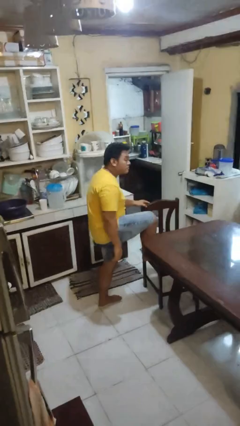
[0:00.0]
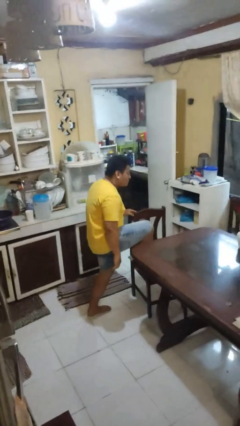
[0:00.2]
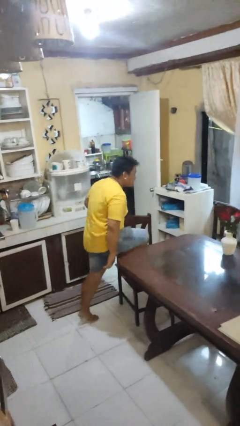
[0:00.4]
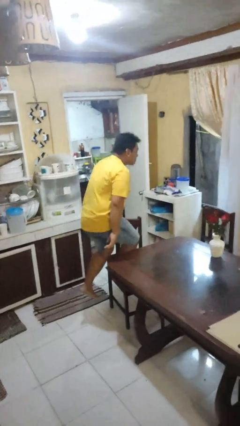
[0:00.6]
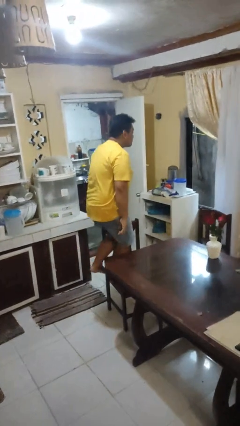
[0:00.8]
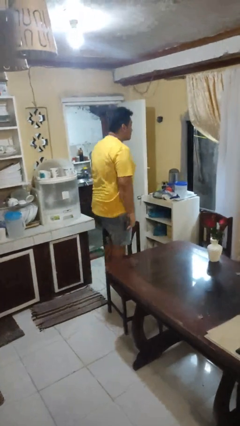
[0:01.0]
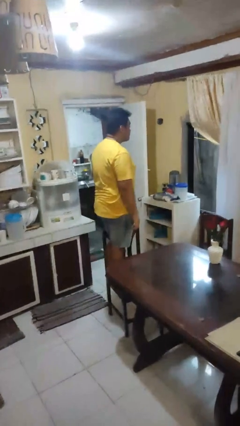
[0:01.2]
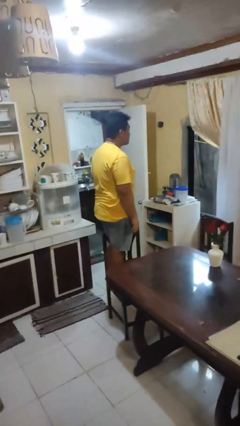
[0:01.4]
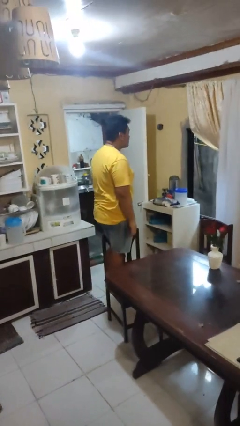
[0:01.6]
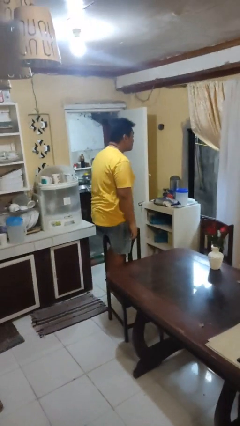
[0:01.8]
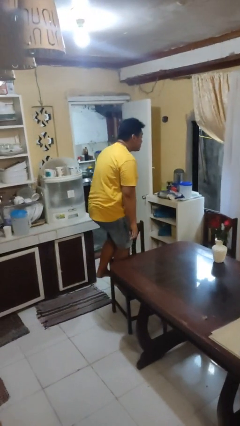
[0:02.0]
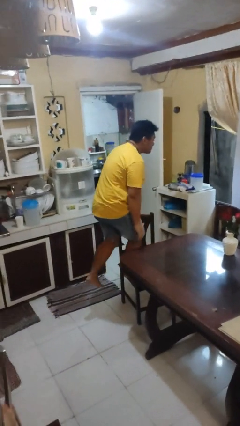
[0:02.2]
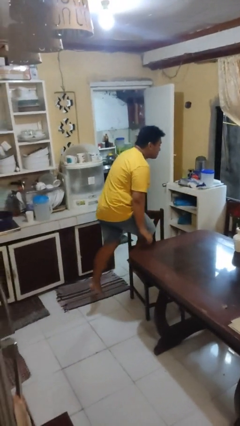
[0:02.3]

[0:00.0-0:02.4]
person climbs on chair

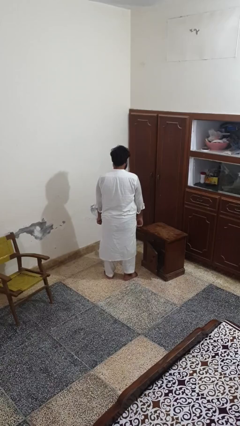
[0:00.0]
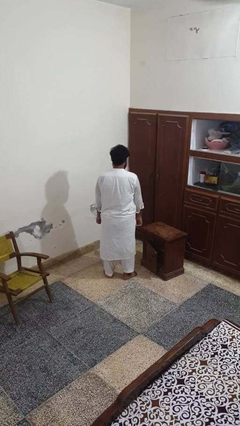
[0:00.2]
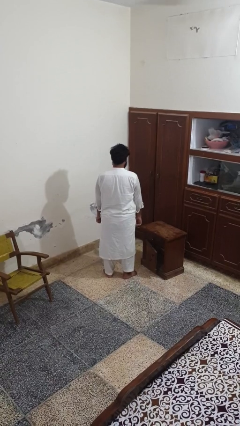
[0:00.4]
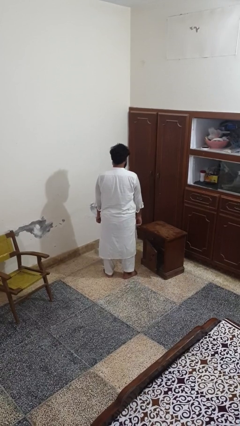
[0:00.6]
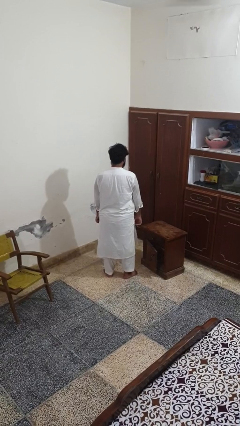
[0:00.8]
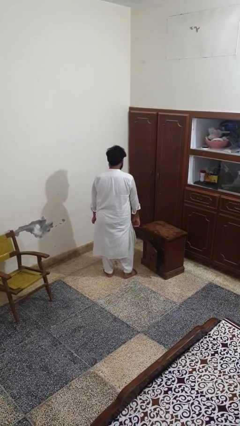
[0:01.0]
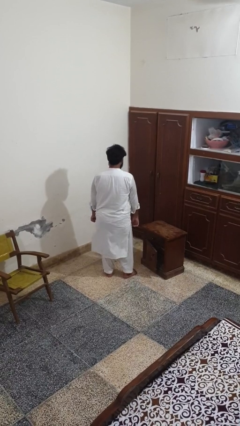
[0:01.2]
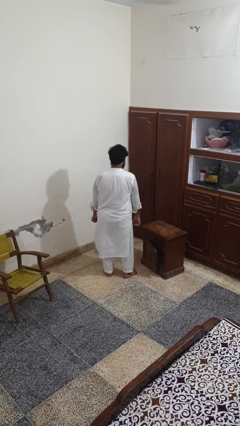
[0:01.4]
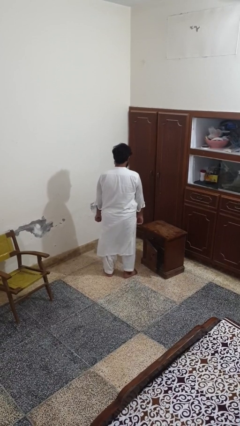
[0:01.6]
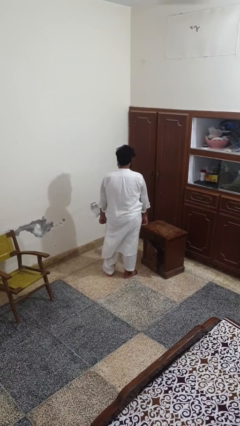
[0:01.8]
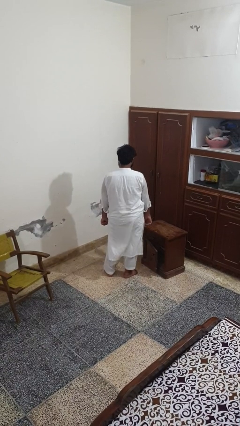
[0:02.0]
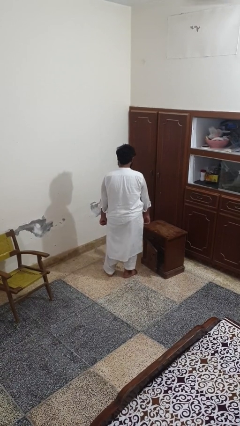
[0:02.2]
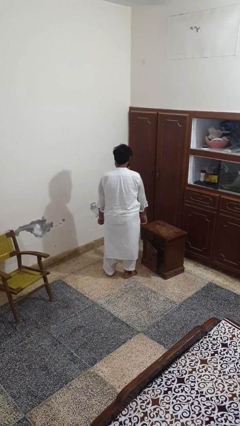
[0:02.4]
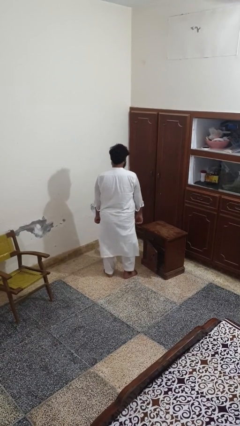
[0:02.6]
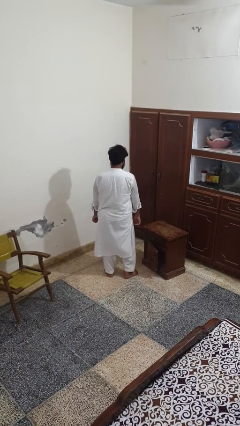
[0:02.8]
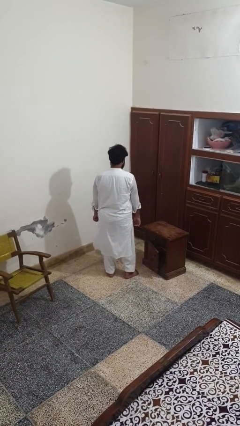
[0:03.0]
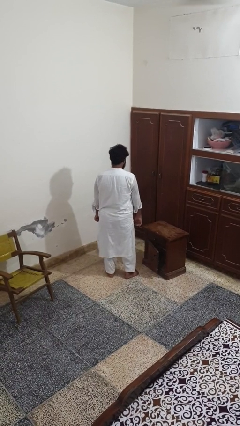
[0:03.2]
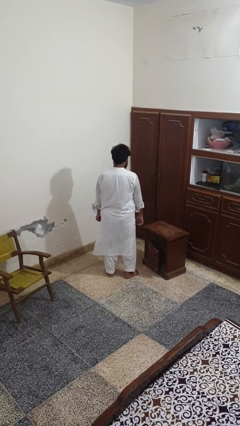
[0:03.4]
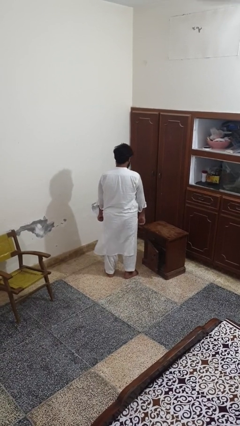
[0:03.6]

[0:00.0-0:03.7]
person wiggles hips

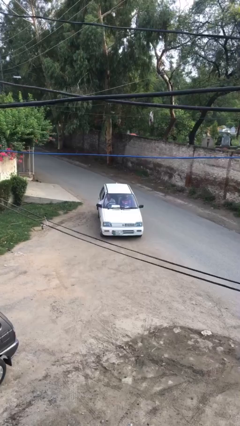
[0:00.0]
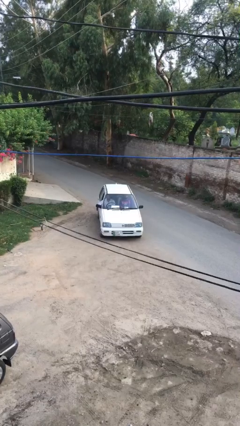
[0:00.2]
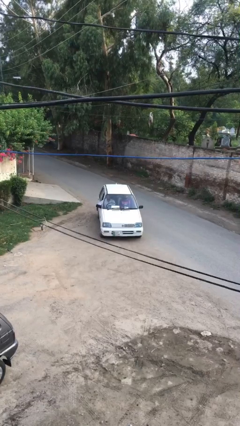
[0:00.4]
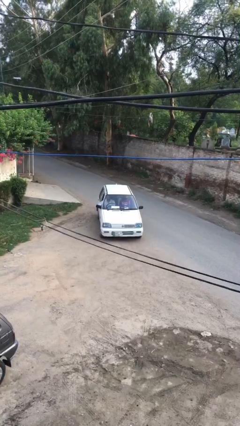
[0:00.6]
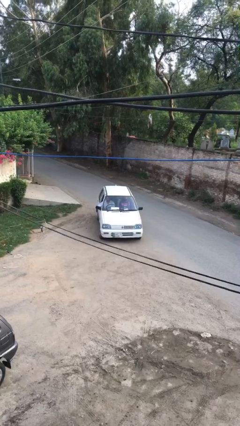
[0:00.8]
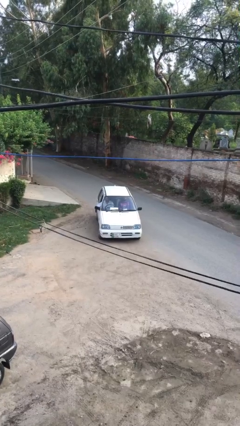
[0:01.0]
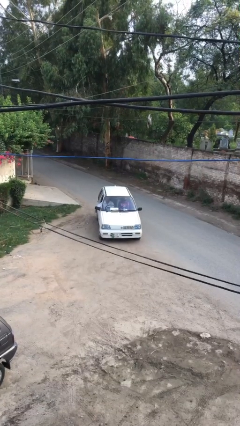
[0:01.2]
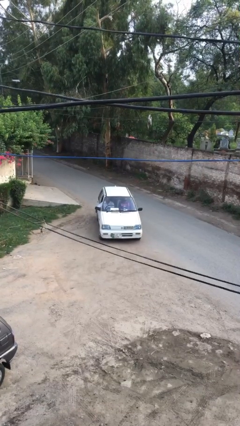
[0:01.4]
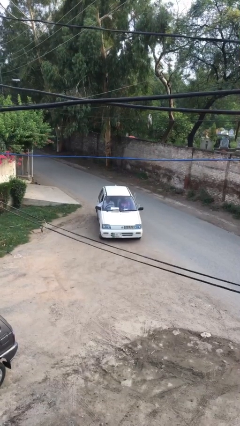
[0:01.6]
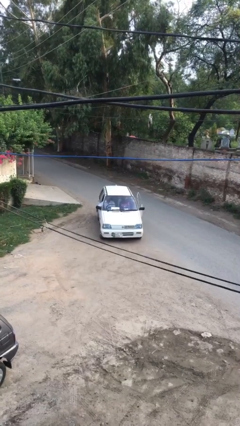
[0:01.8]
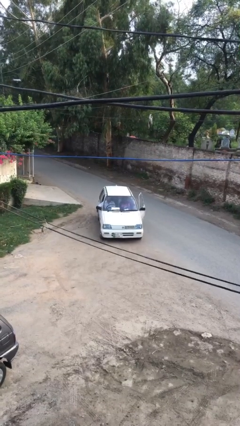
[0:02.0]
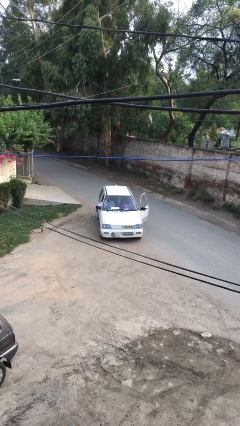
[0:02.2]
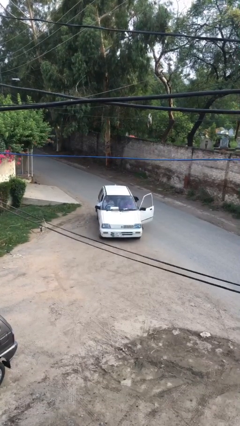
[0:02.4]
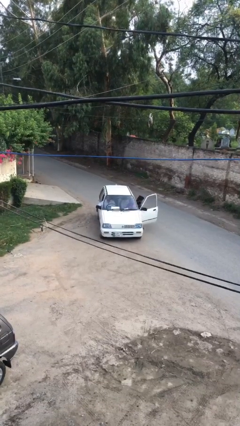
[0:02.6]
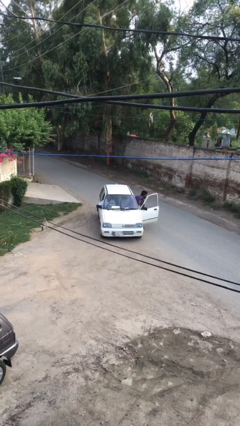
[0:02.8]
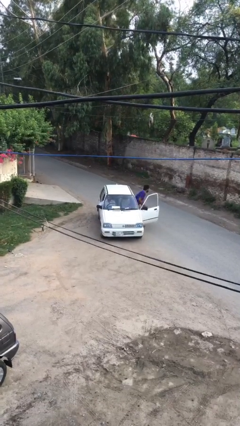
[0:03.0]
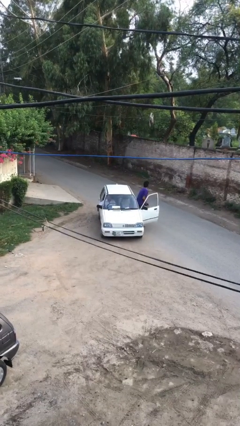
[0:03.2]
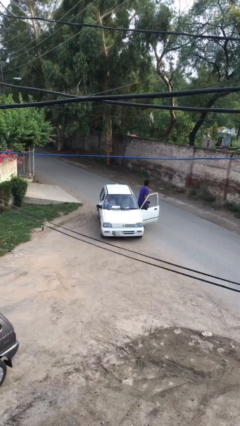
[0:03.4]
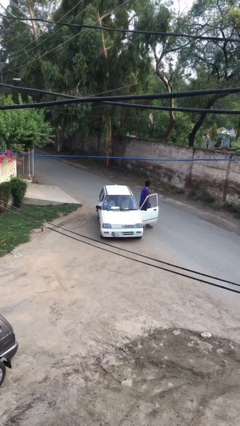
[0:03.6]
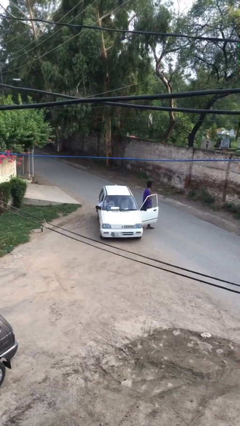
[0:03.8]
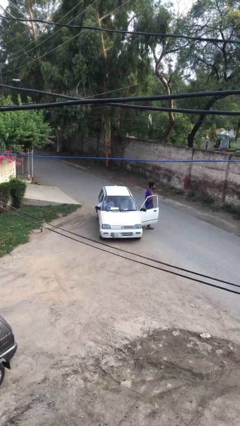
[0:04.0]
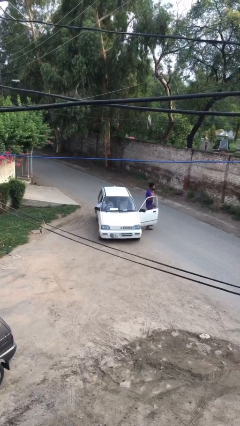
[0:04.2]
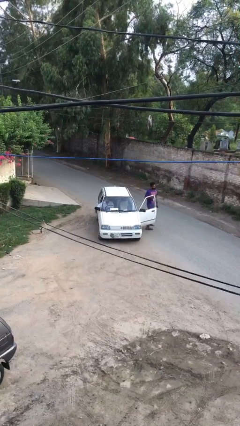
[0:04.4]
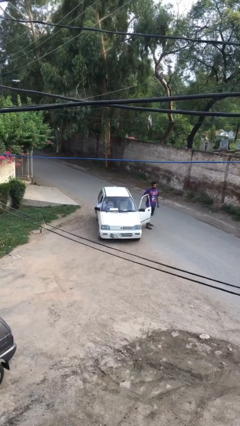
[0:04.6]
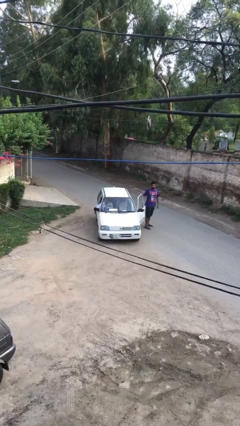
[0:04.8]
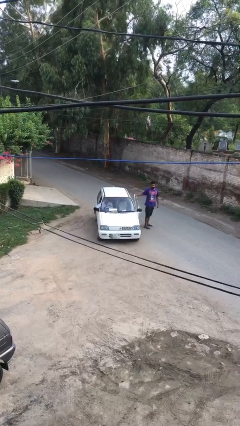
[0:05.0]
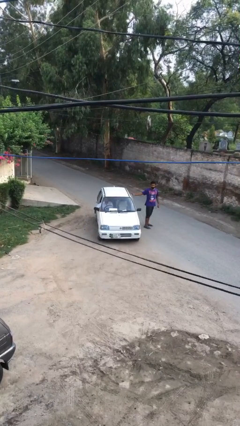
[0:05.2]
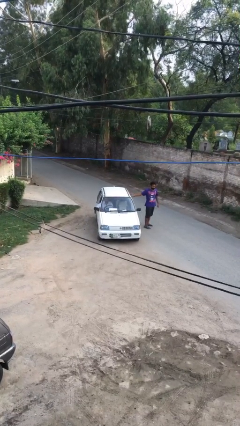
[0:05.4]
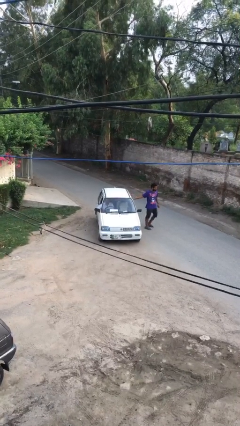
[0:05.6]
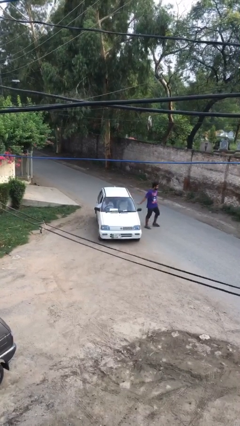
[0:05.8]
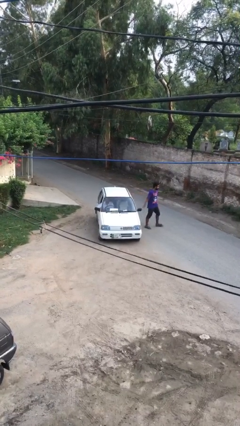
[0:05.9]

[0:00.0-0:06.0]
car drops off person

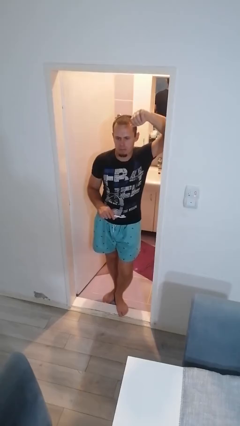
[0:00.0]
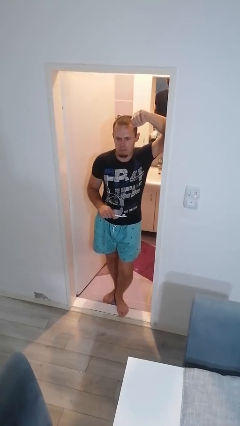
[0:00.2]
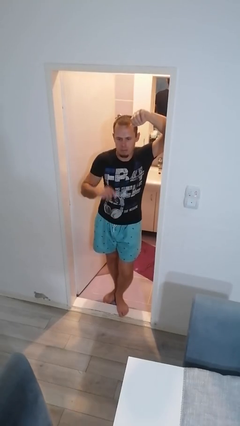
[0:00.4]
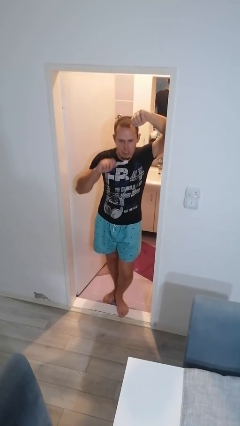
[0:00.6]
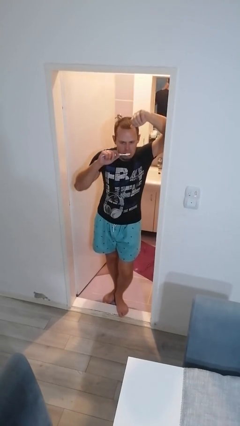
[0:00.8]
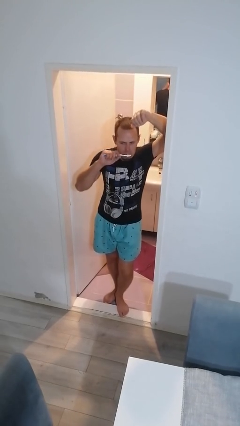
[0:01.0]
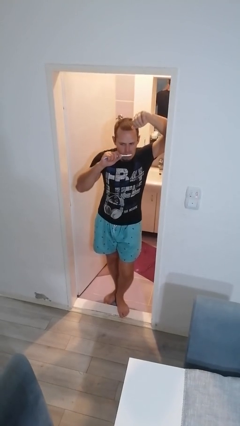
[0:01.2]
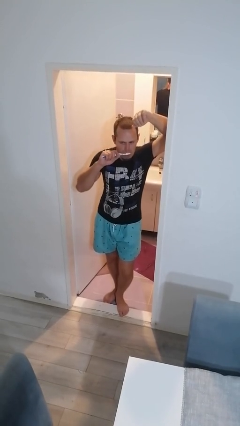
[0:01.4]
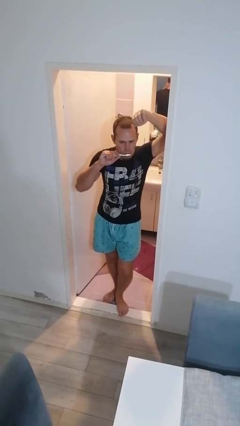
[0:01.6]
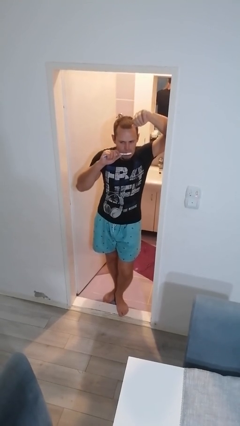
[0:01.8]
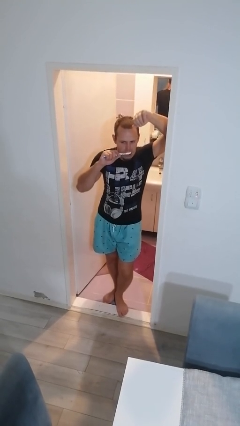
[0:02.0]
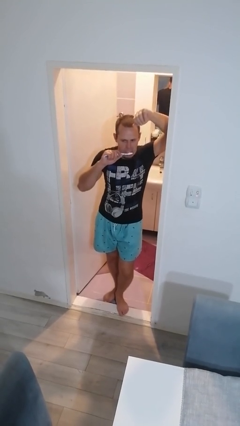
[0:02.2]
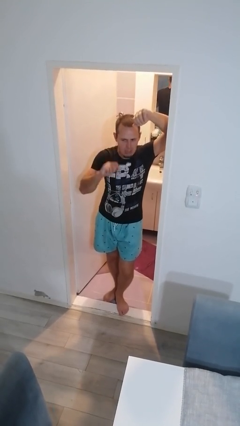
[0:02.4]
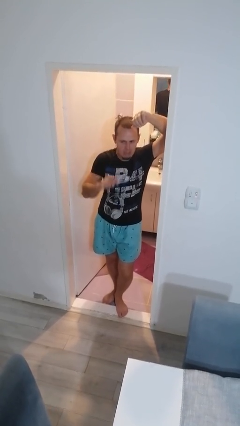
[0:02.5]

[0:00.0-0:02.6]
person brushes teeth

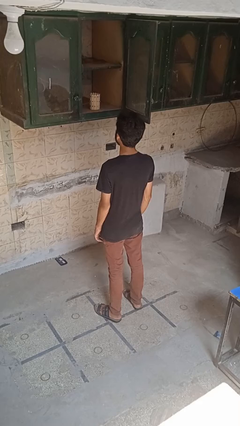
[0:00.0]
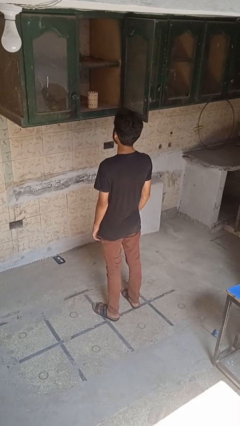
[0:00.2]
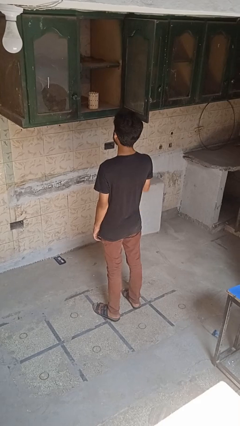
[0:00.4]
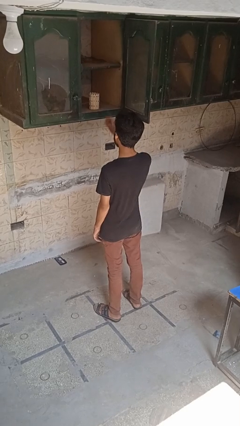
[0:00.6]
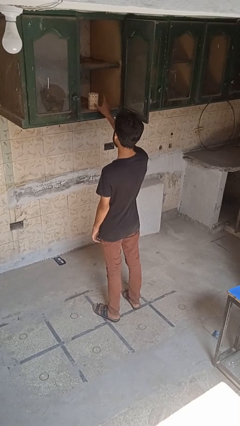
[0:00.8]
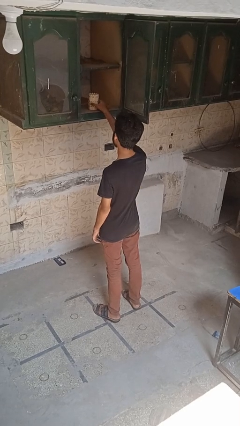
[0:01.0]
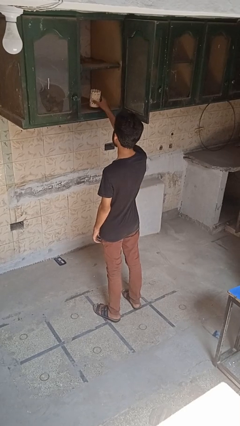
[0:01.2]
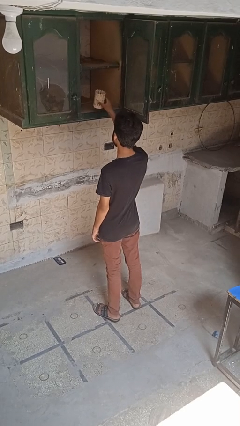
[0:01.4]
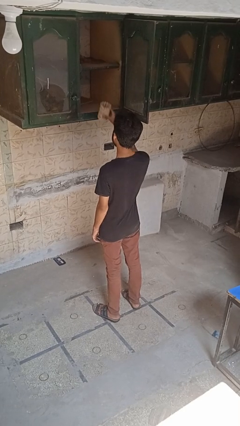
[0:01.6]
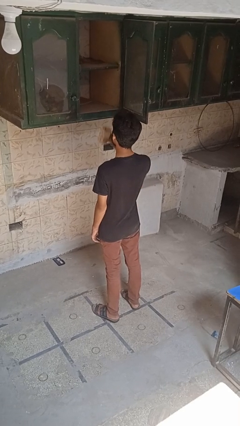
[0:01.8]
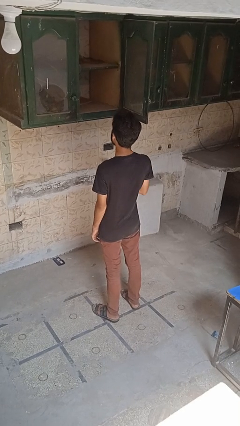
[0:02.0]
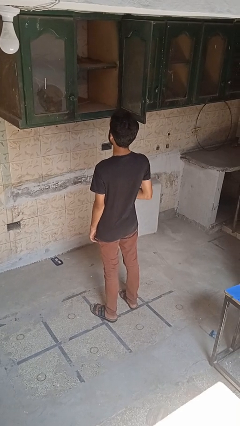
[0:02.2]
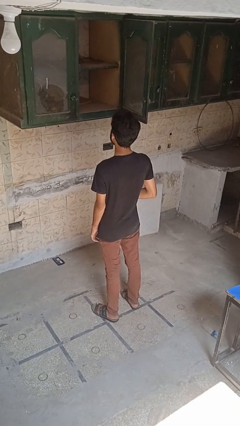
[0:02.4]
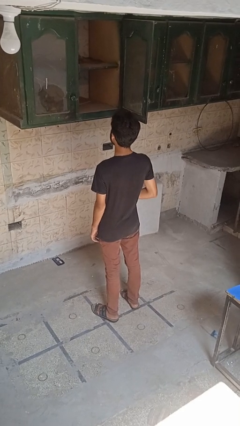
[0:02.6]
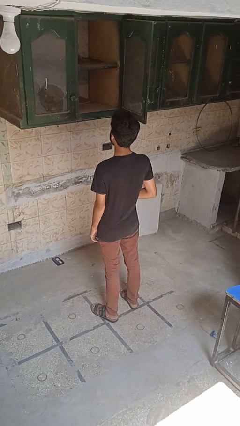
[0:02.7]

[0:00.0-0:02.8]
person picks up object from cabinet
